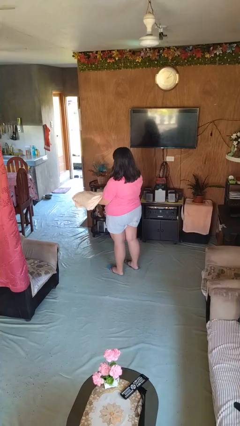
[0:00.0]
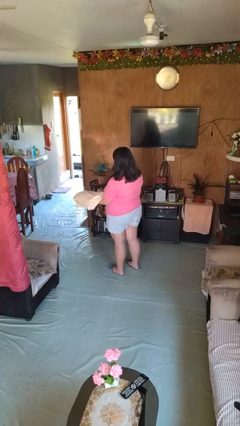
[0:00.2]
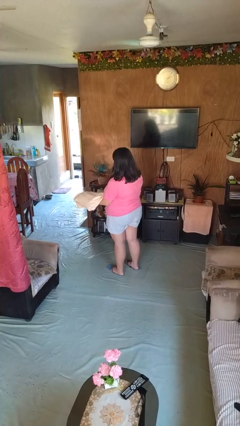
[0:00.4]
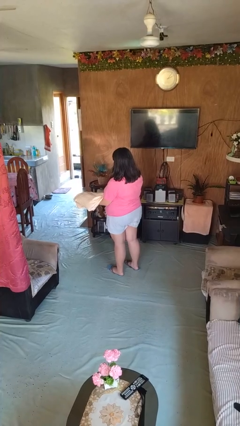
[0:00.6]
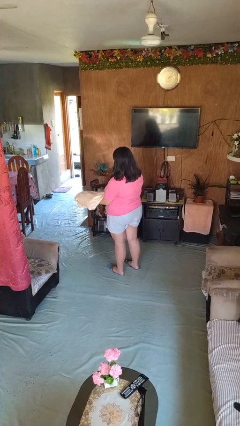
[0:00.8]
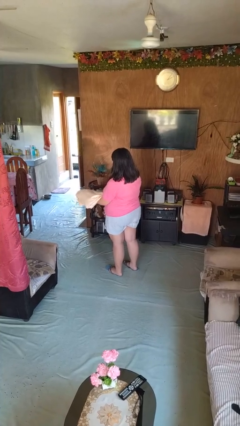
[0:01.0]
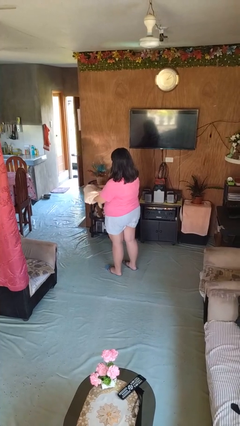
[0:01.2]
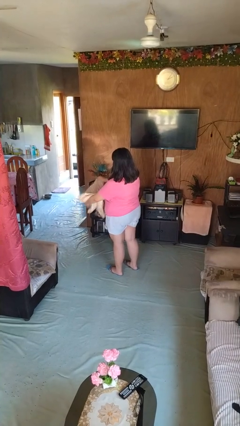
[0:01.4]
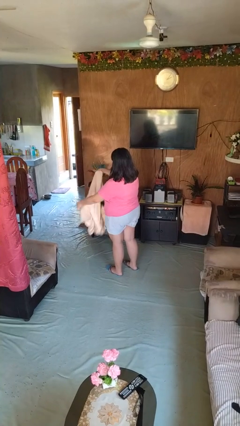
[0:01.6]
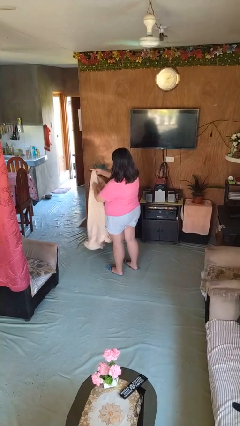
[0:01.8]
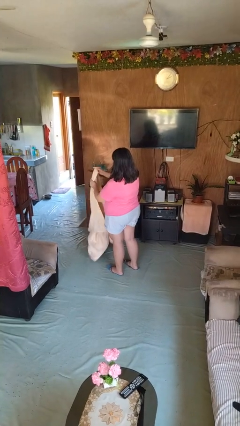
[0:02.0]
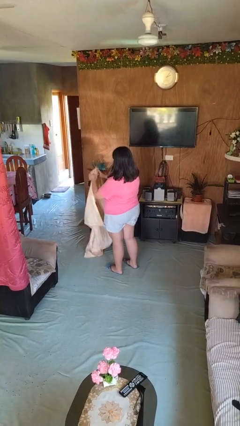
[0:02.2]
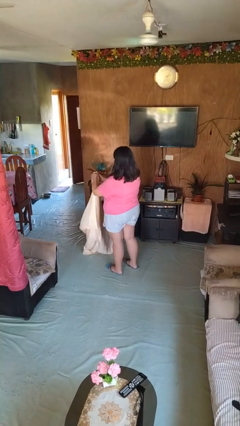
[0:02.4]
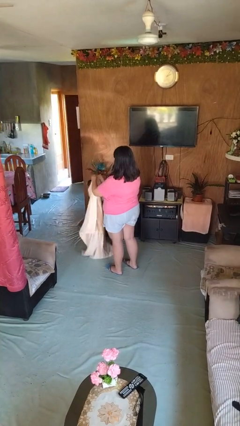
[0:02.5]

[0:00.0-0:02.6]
person unfolds blanket

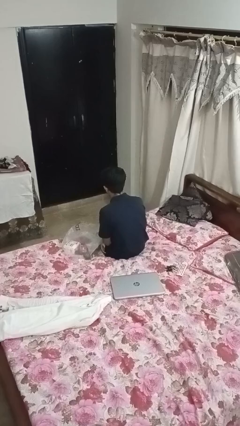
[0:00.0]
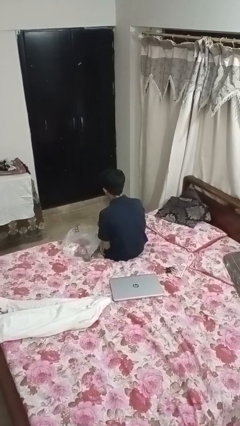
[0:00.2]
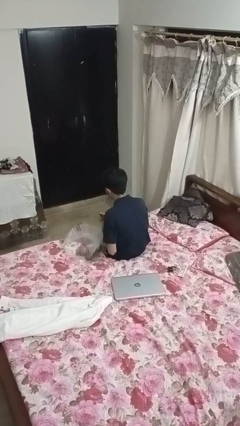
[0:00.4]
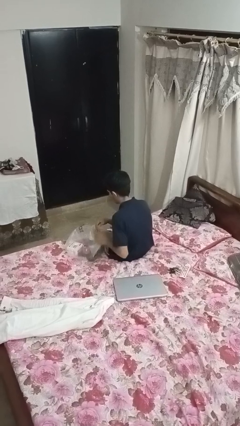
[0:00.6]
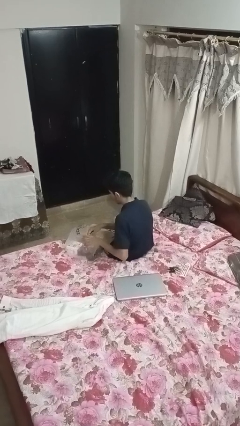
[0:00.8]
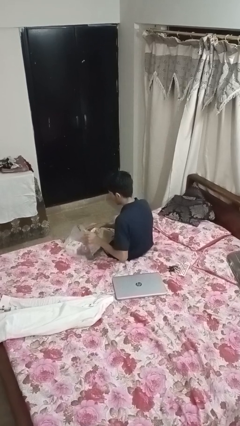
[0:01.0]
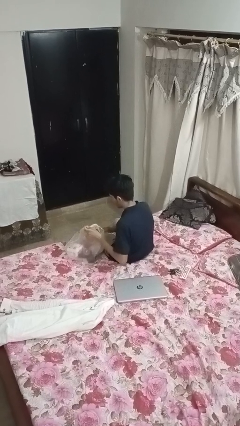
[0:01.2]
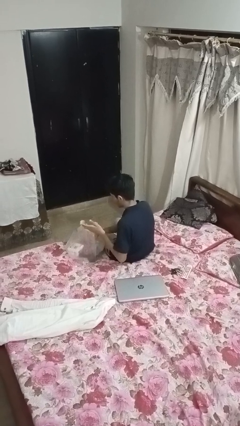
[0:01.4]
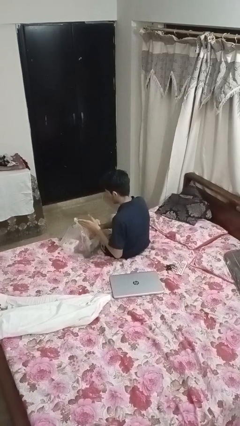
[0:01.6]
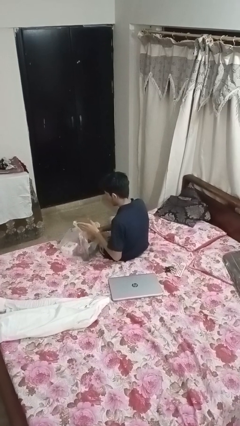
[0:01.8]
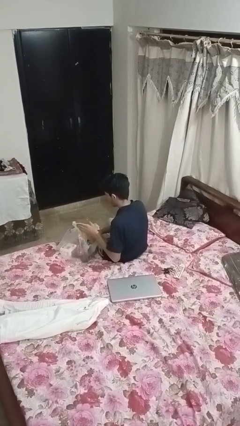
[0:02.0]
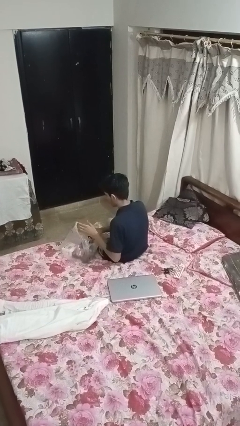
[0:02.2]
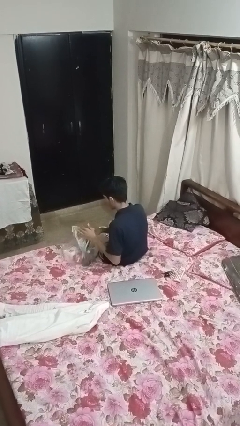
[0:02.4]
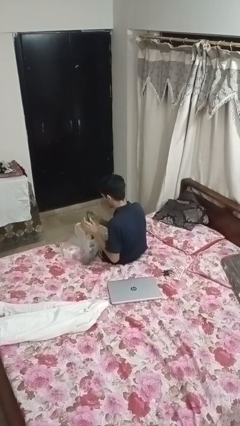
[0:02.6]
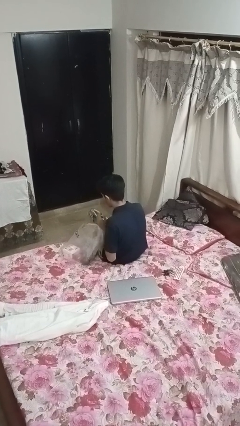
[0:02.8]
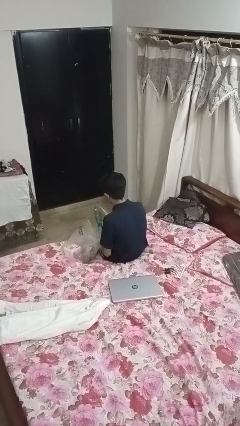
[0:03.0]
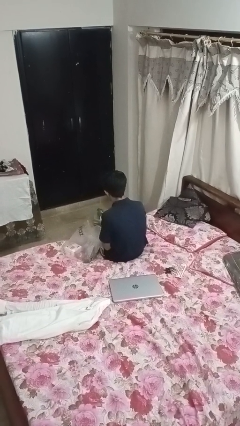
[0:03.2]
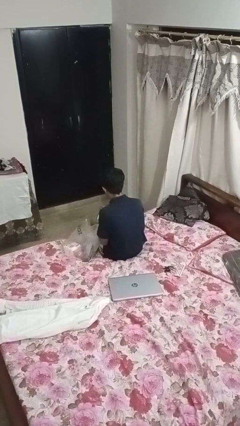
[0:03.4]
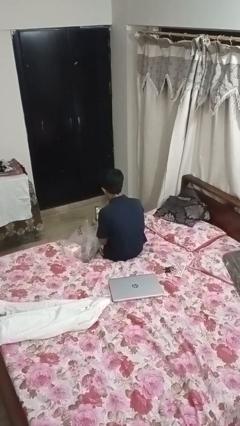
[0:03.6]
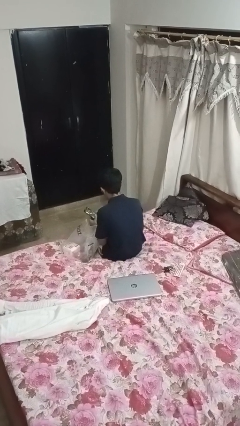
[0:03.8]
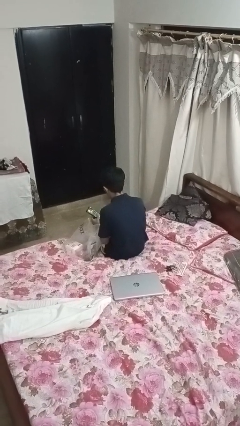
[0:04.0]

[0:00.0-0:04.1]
person takes object from bag

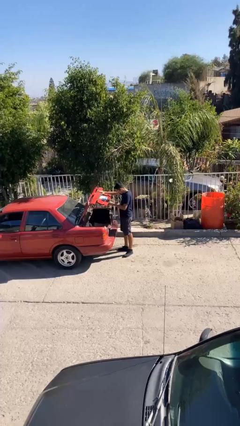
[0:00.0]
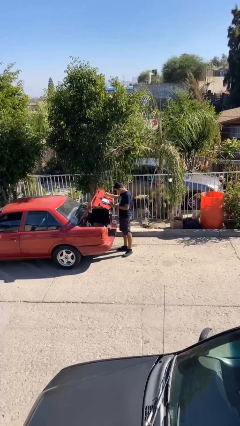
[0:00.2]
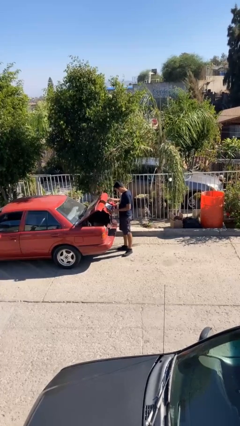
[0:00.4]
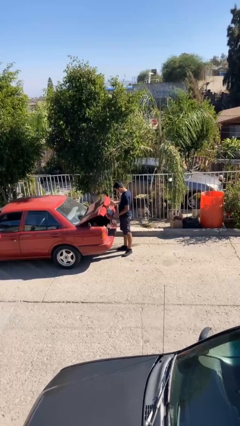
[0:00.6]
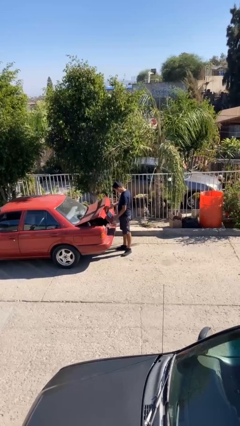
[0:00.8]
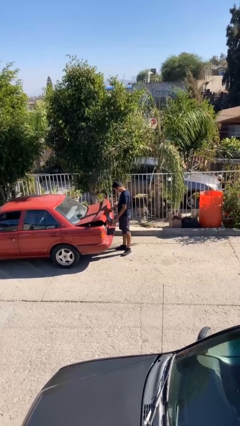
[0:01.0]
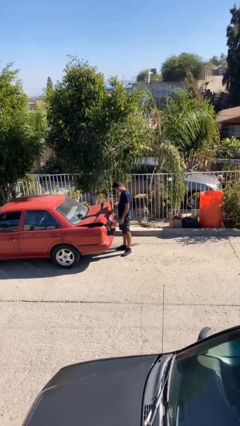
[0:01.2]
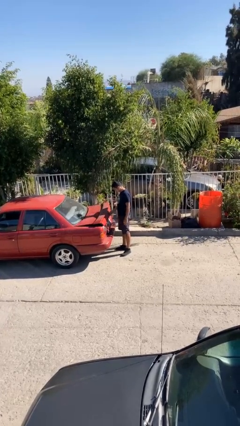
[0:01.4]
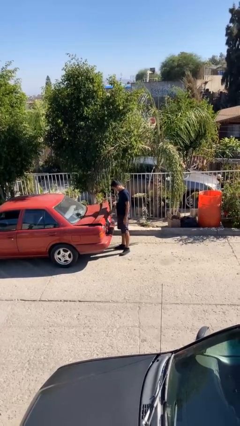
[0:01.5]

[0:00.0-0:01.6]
person closes car trunk

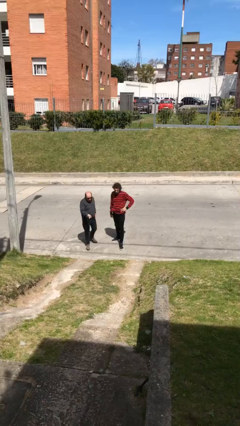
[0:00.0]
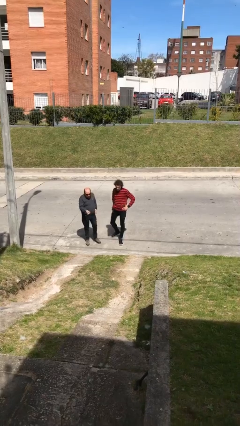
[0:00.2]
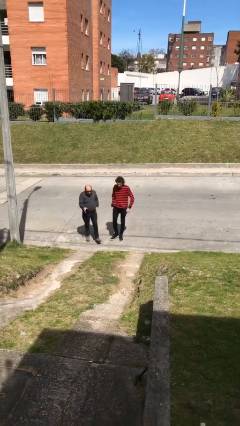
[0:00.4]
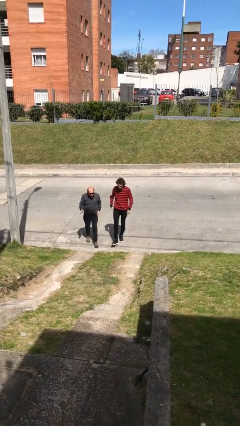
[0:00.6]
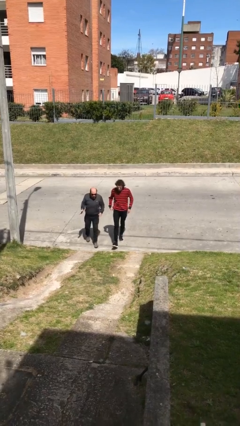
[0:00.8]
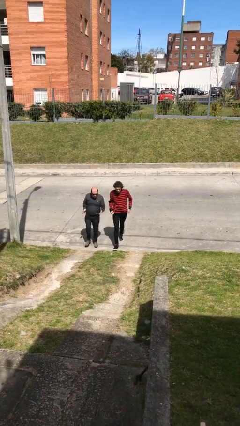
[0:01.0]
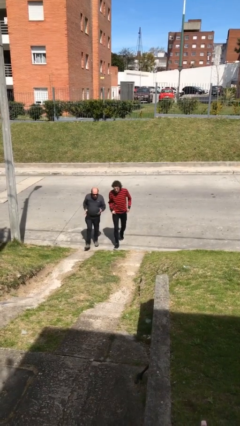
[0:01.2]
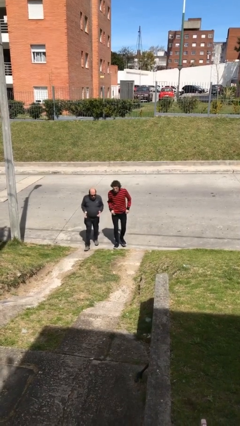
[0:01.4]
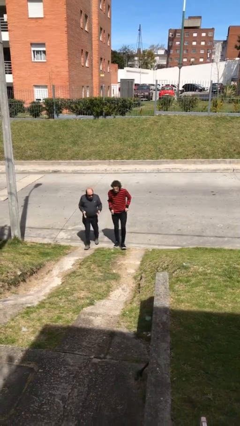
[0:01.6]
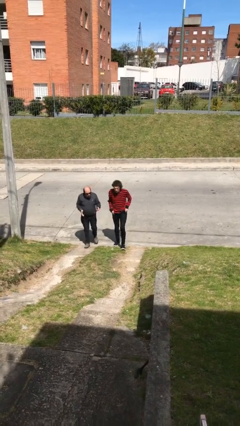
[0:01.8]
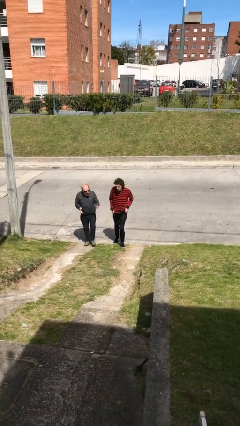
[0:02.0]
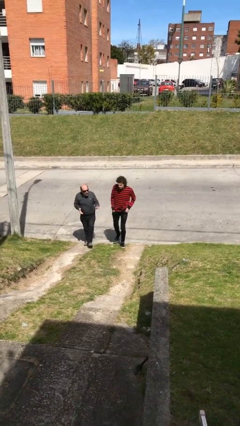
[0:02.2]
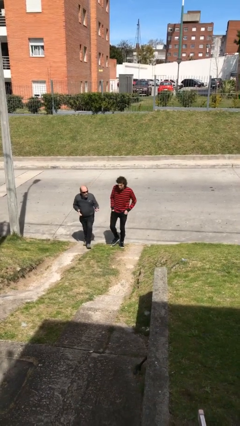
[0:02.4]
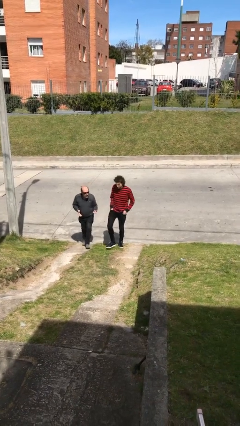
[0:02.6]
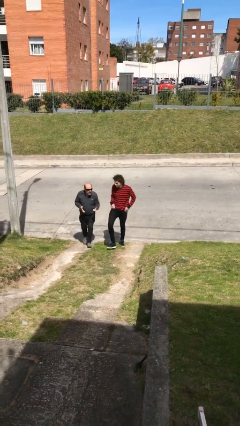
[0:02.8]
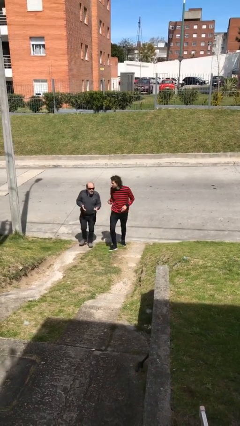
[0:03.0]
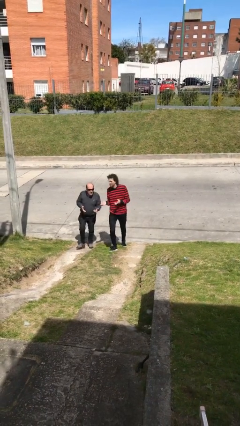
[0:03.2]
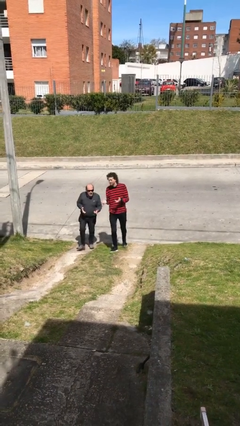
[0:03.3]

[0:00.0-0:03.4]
person talks to person

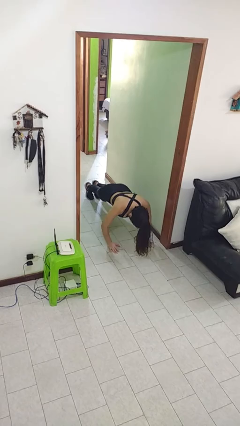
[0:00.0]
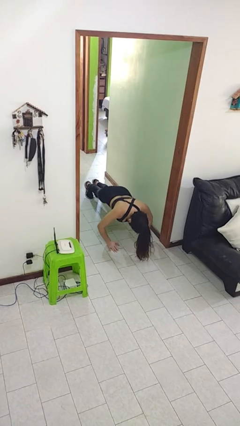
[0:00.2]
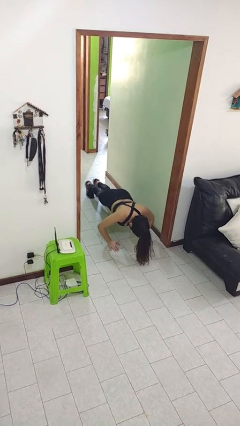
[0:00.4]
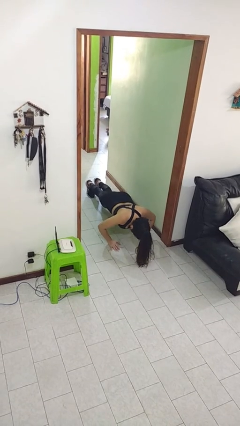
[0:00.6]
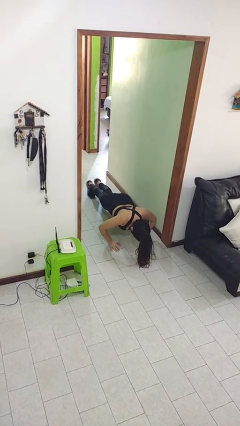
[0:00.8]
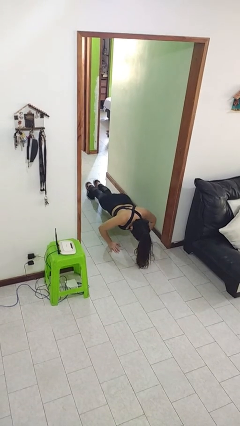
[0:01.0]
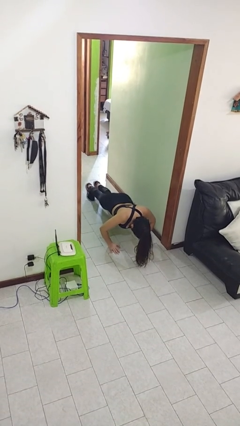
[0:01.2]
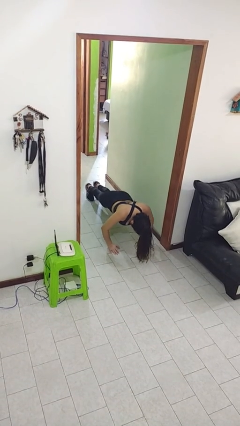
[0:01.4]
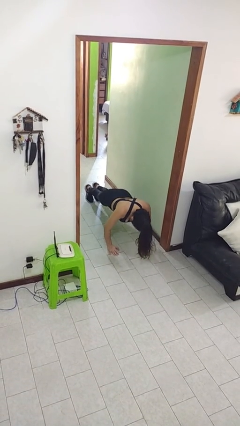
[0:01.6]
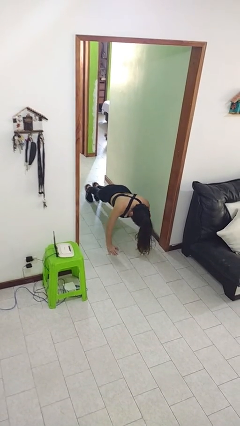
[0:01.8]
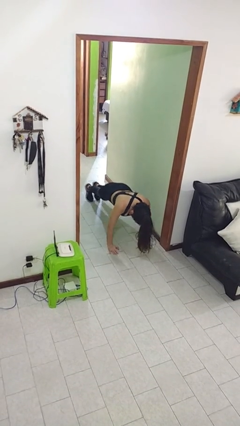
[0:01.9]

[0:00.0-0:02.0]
person exercises with pushup

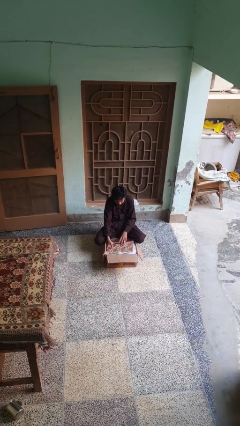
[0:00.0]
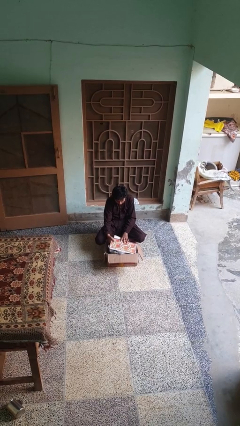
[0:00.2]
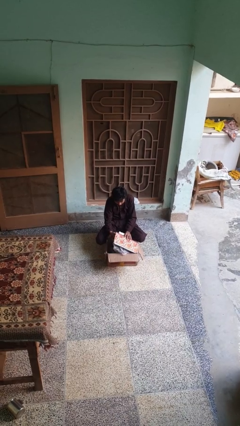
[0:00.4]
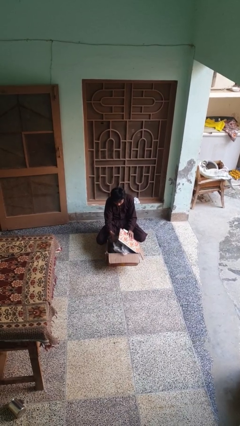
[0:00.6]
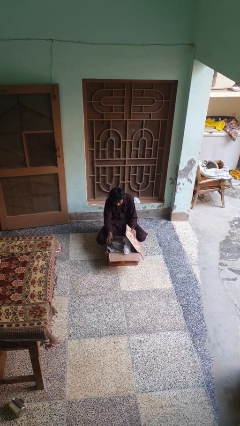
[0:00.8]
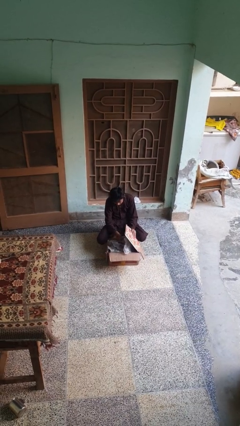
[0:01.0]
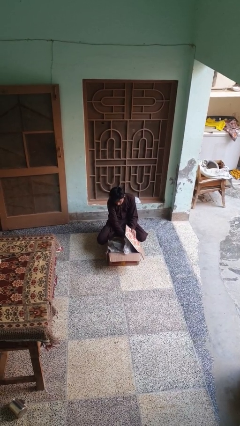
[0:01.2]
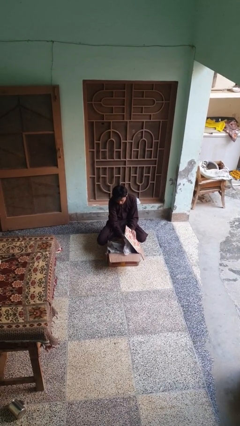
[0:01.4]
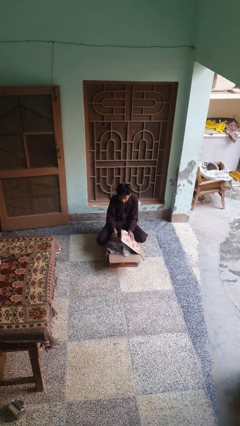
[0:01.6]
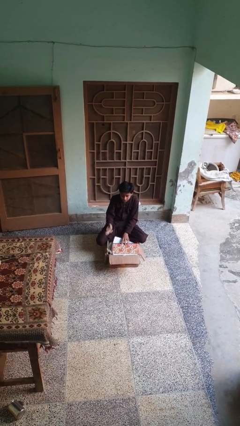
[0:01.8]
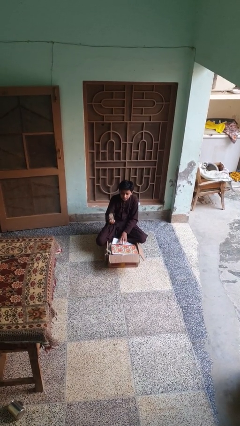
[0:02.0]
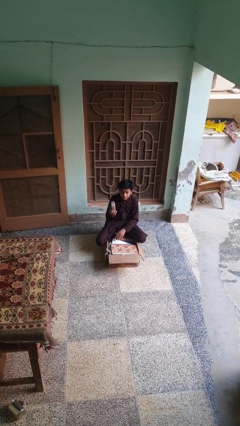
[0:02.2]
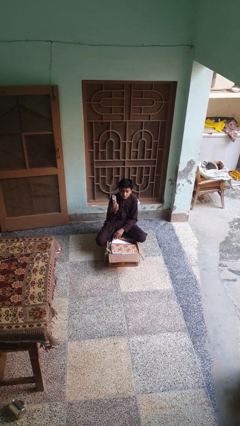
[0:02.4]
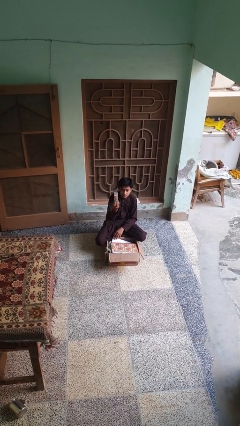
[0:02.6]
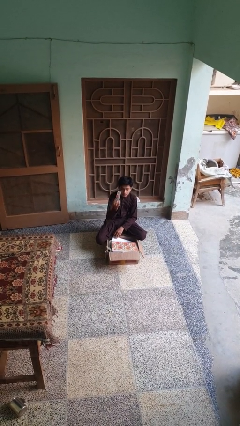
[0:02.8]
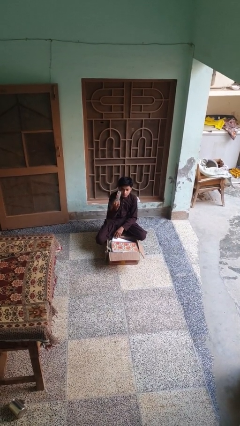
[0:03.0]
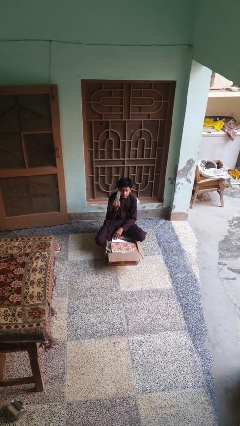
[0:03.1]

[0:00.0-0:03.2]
person takes object from box

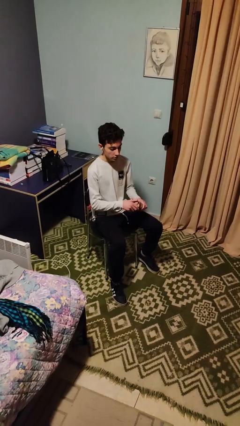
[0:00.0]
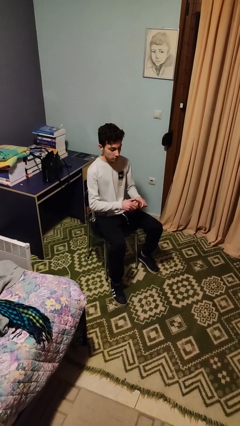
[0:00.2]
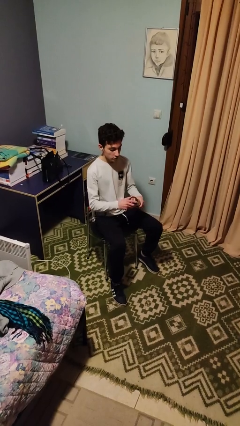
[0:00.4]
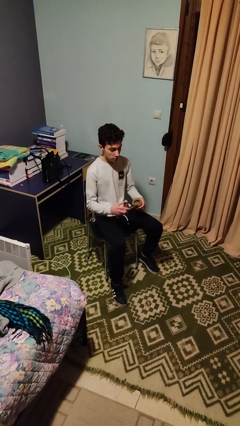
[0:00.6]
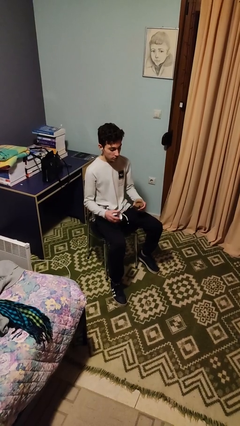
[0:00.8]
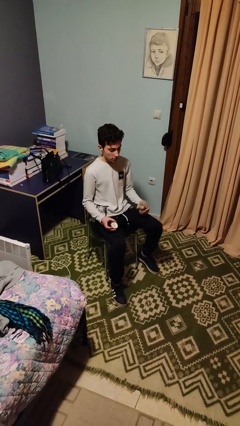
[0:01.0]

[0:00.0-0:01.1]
person opens jar
